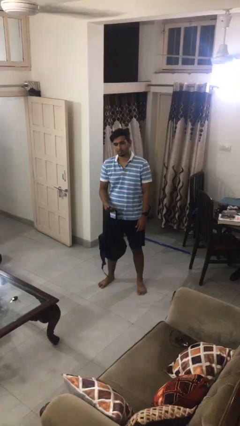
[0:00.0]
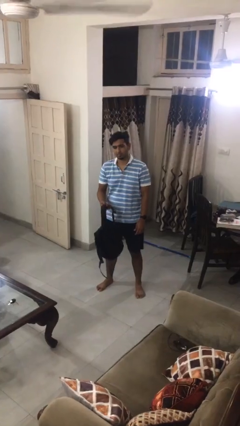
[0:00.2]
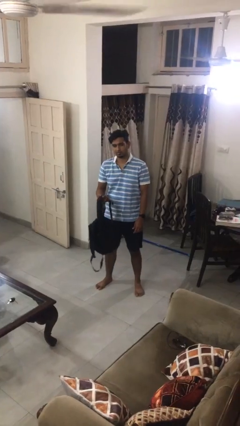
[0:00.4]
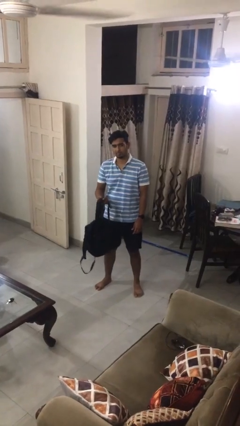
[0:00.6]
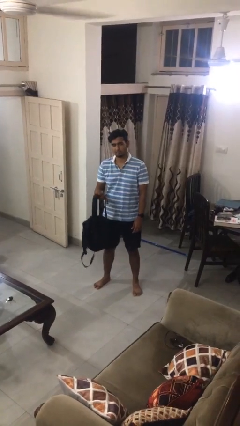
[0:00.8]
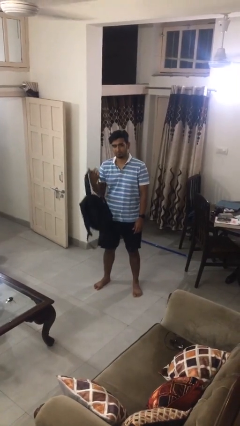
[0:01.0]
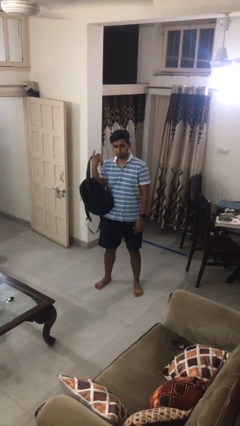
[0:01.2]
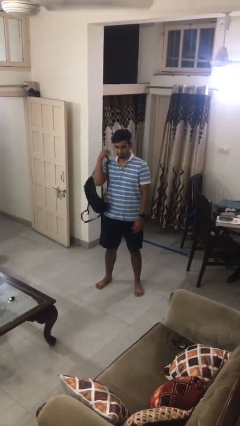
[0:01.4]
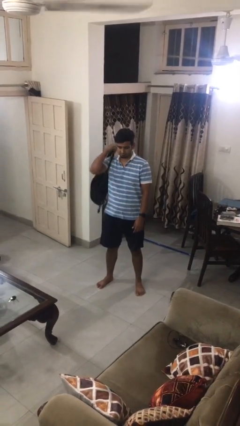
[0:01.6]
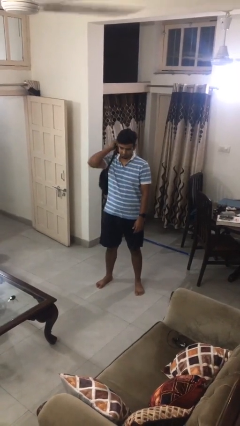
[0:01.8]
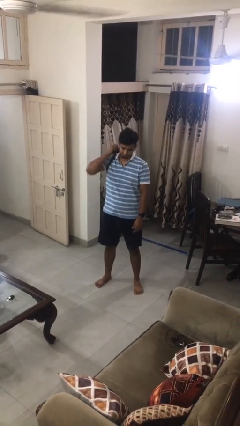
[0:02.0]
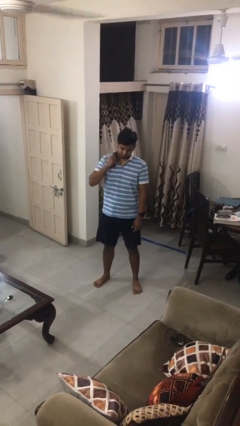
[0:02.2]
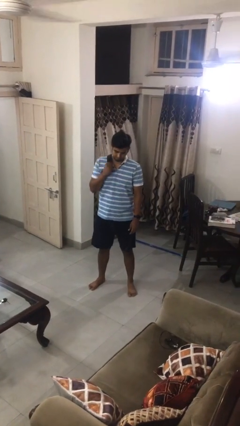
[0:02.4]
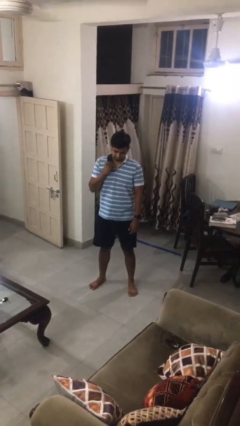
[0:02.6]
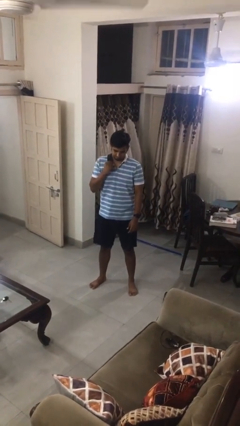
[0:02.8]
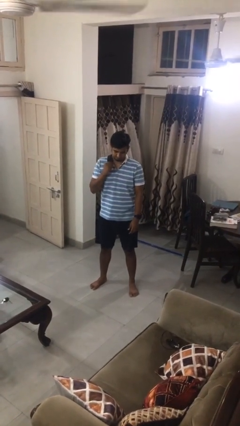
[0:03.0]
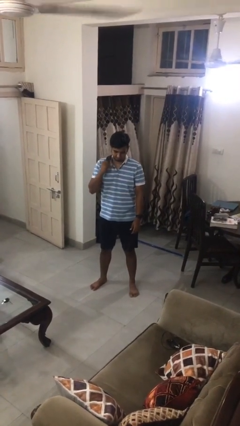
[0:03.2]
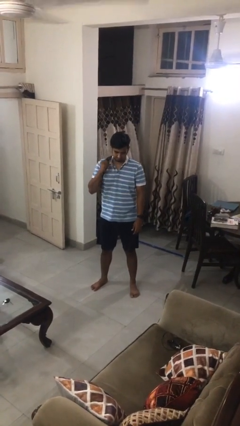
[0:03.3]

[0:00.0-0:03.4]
person puts on backpack

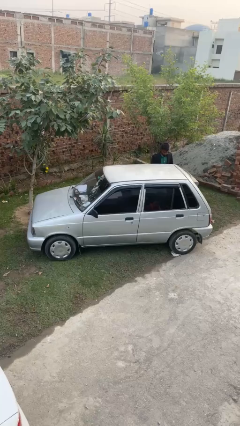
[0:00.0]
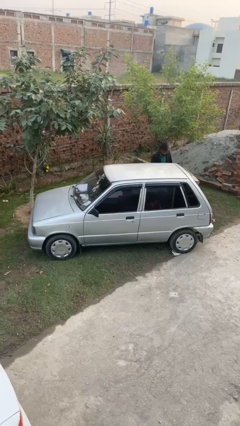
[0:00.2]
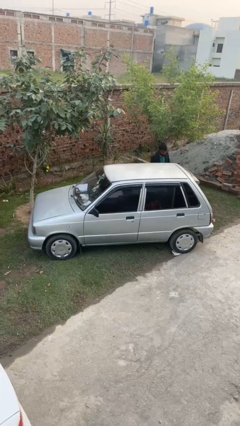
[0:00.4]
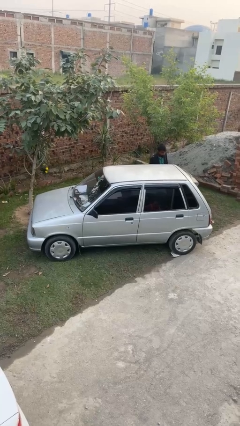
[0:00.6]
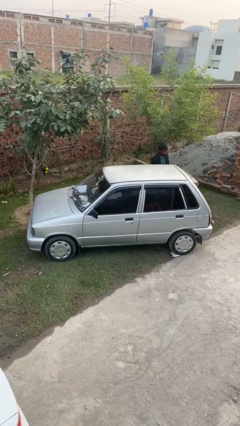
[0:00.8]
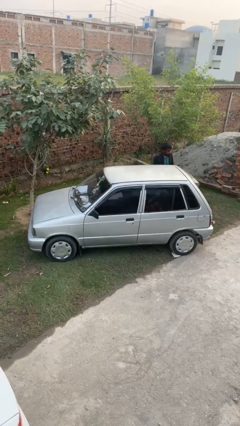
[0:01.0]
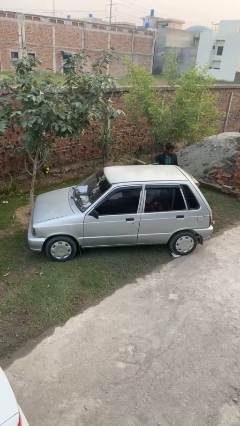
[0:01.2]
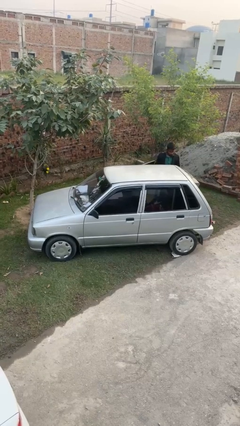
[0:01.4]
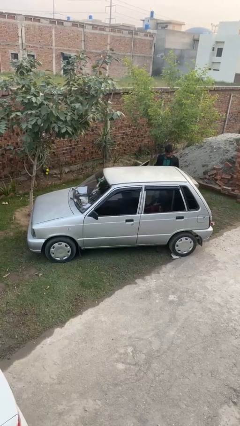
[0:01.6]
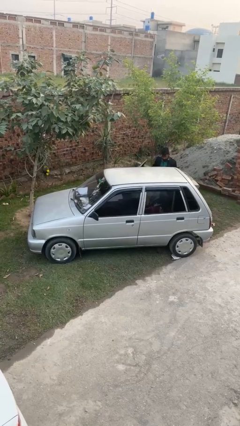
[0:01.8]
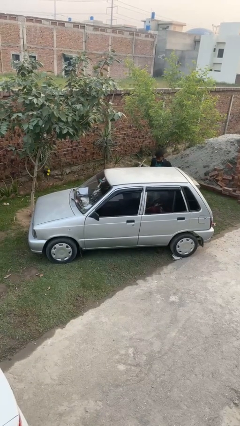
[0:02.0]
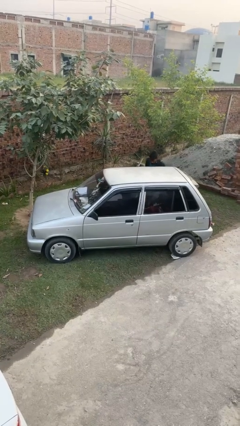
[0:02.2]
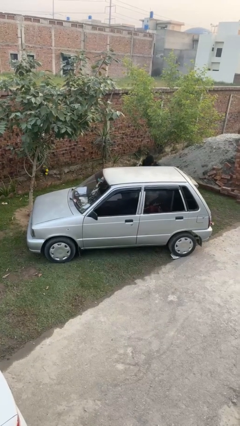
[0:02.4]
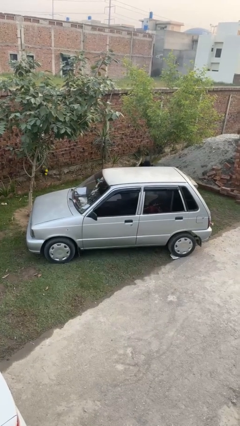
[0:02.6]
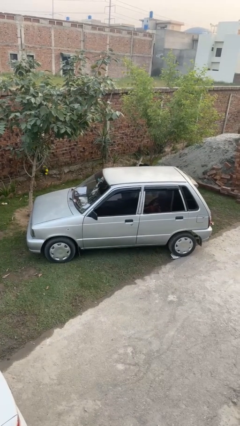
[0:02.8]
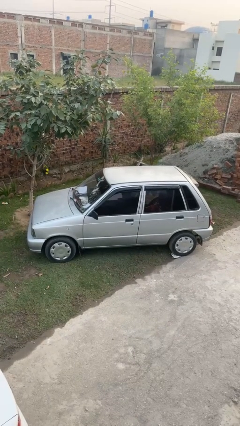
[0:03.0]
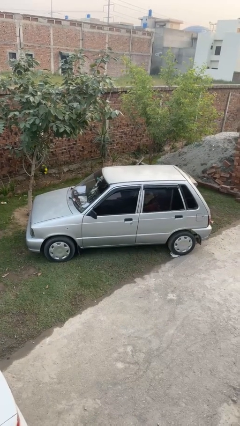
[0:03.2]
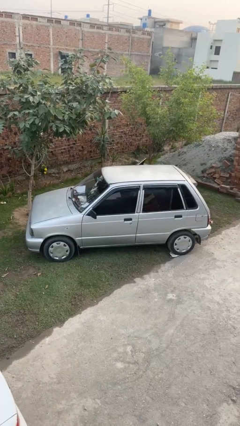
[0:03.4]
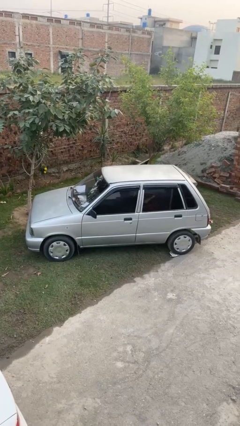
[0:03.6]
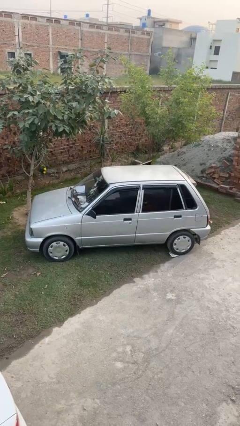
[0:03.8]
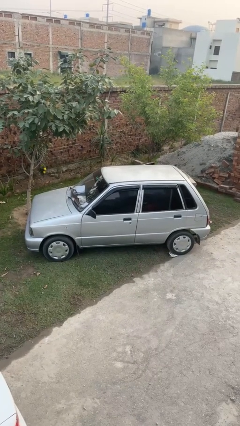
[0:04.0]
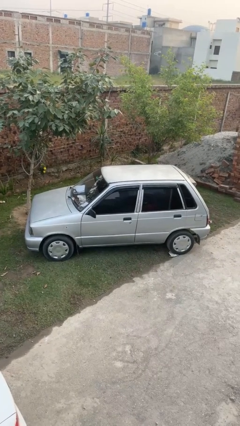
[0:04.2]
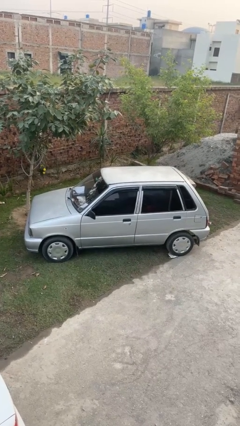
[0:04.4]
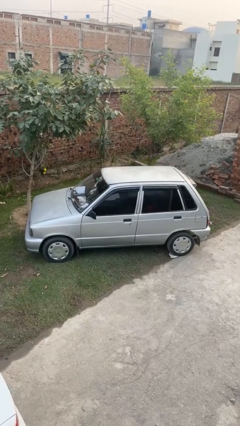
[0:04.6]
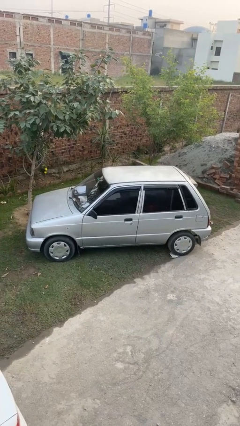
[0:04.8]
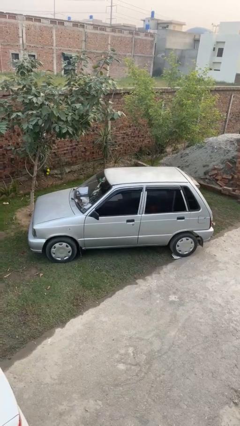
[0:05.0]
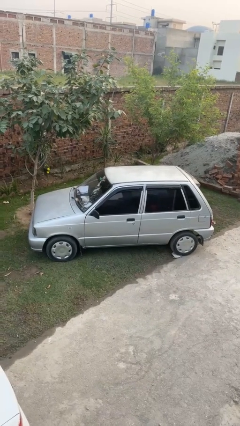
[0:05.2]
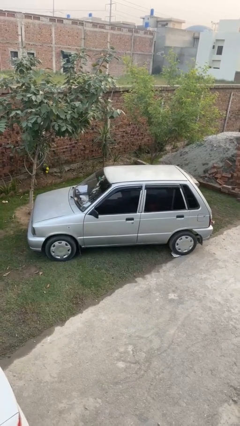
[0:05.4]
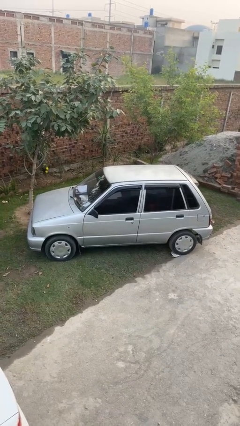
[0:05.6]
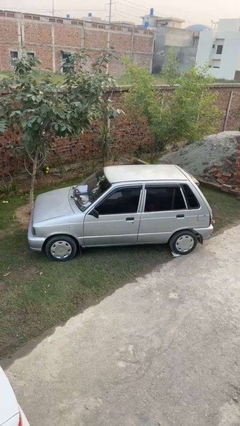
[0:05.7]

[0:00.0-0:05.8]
car picks up person

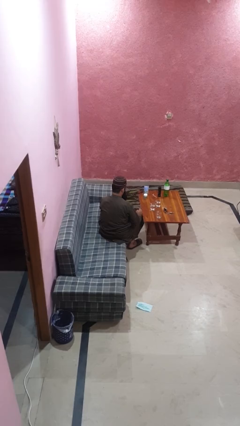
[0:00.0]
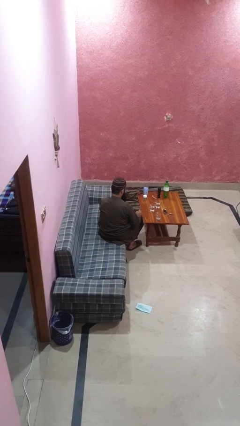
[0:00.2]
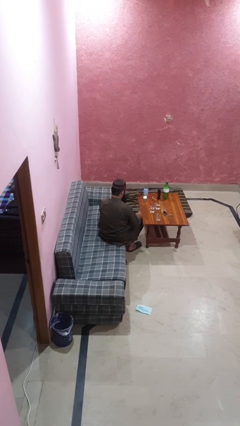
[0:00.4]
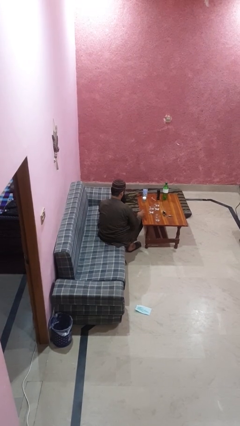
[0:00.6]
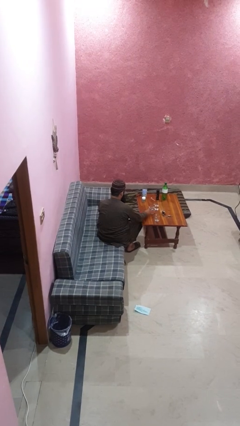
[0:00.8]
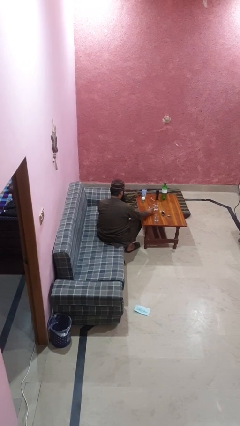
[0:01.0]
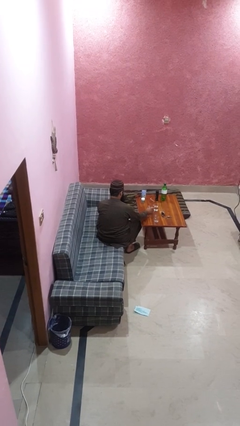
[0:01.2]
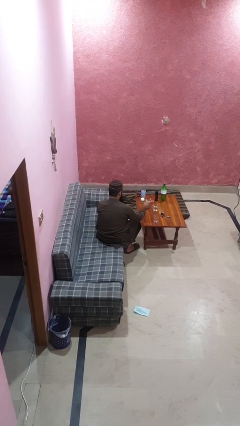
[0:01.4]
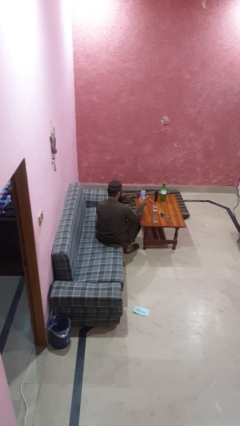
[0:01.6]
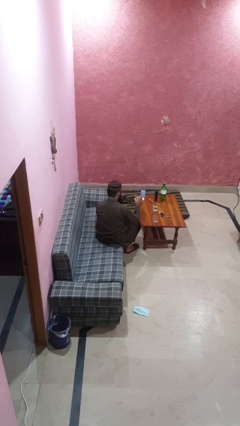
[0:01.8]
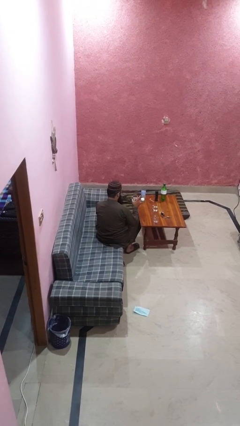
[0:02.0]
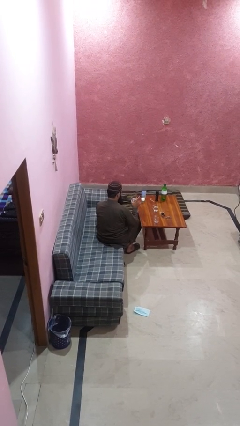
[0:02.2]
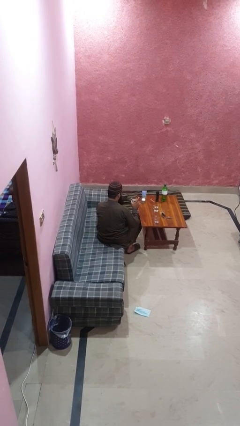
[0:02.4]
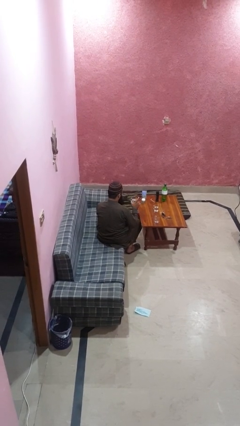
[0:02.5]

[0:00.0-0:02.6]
person picks up object from table

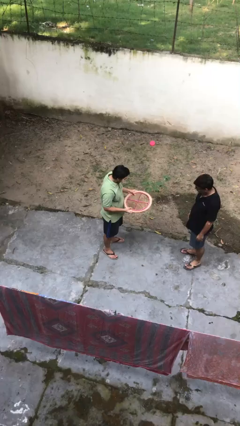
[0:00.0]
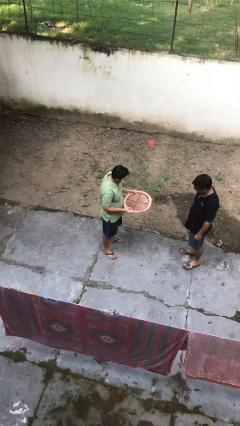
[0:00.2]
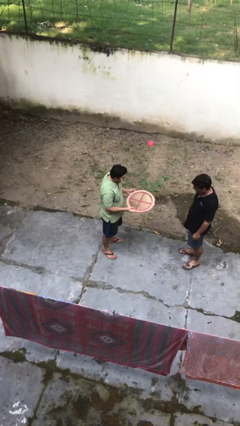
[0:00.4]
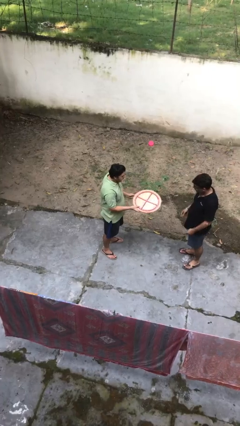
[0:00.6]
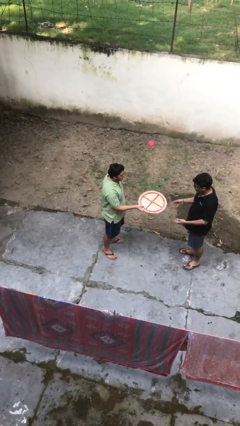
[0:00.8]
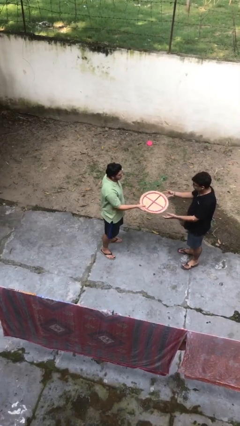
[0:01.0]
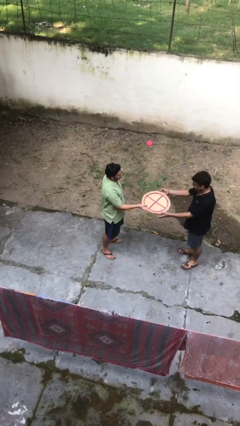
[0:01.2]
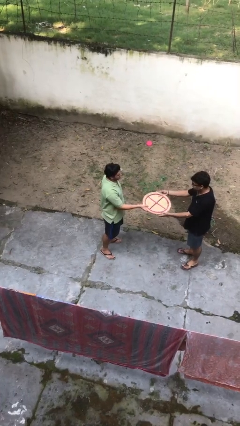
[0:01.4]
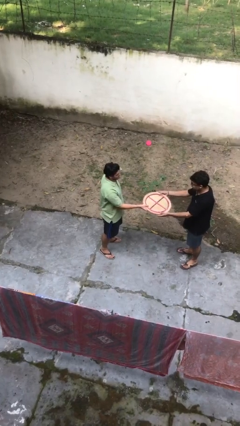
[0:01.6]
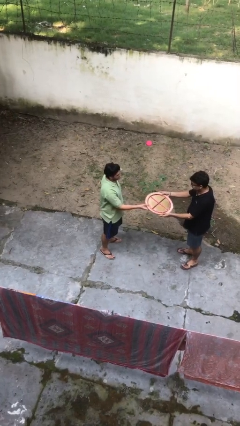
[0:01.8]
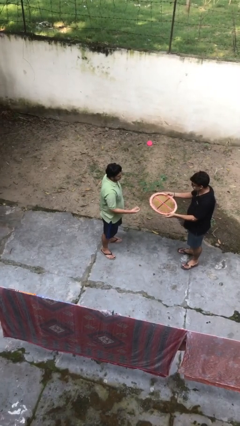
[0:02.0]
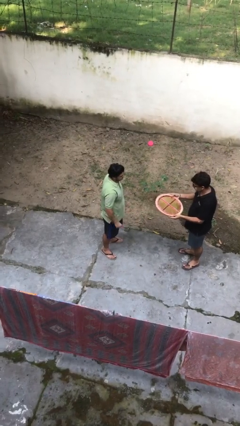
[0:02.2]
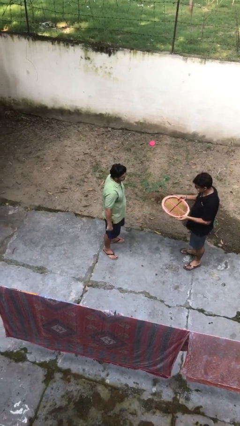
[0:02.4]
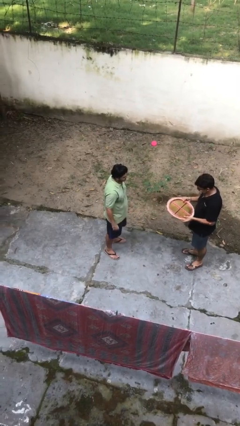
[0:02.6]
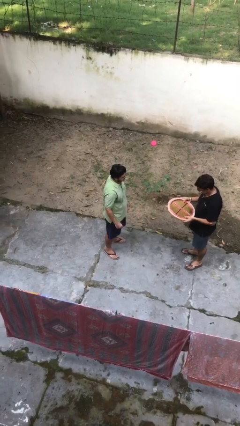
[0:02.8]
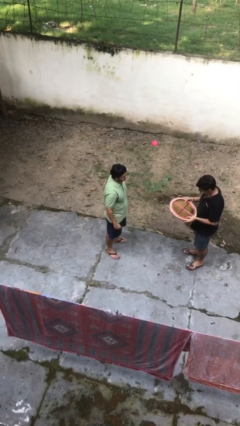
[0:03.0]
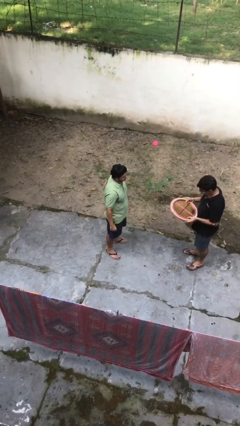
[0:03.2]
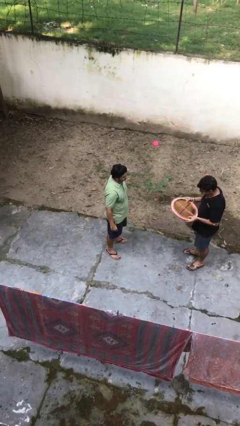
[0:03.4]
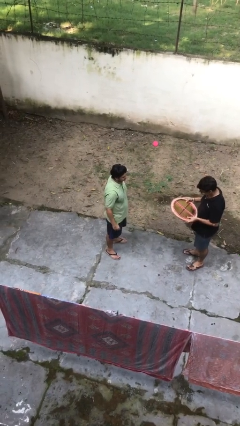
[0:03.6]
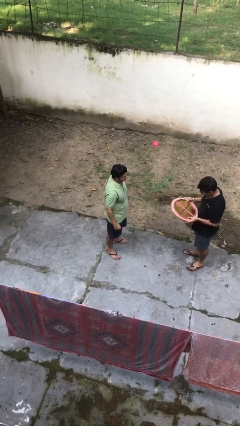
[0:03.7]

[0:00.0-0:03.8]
person transfers object to person

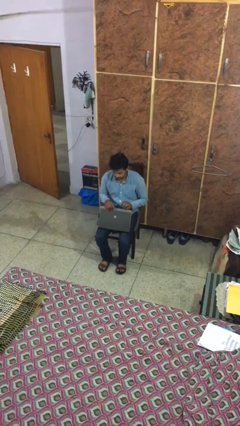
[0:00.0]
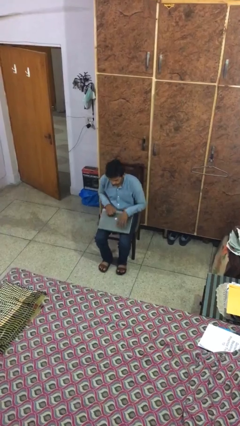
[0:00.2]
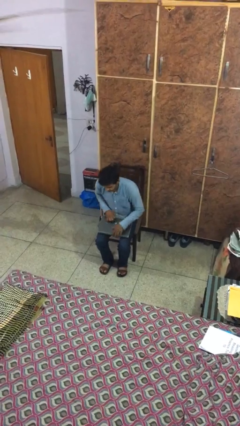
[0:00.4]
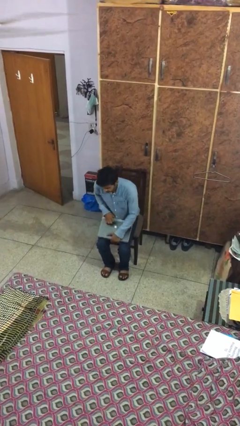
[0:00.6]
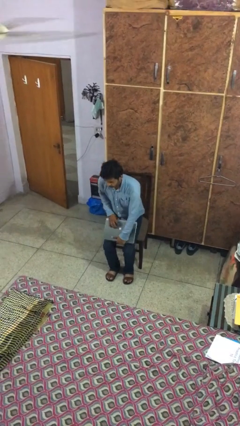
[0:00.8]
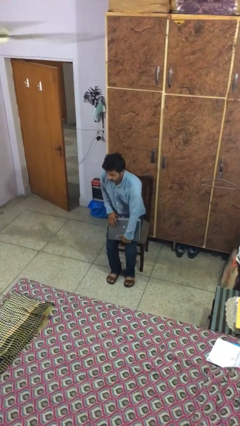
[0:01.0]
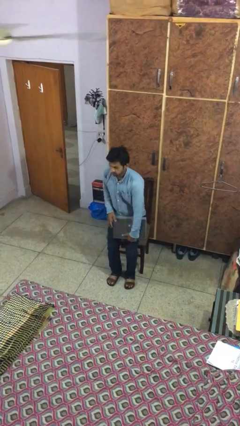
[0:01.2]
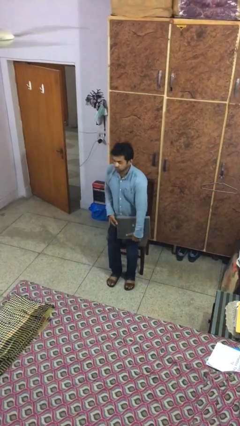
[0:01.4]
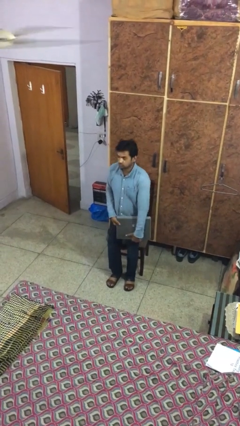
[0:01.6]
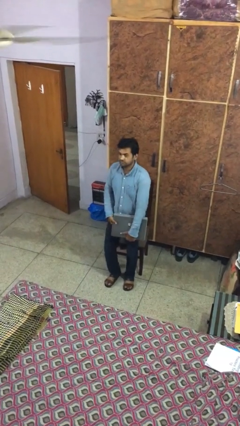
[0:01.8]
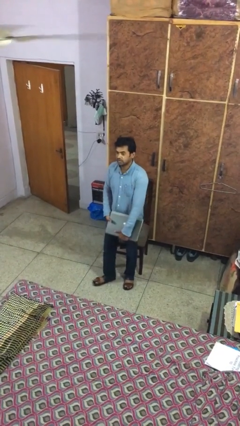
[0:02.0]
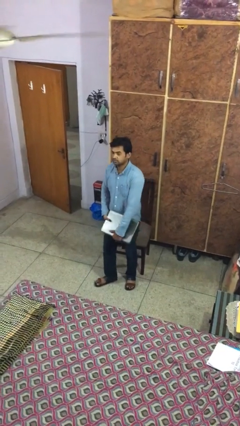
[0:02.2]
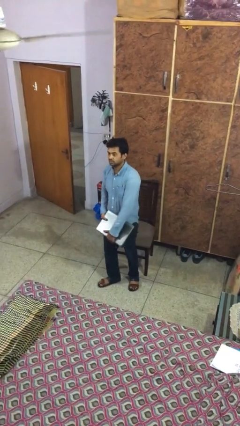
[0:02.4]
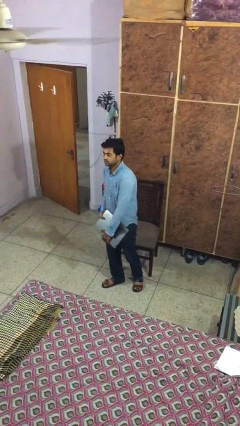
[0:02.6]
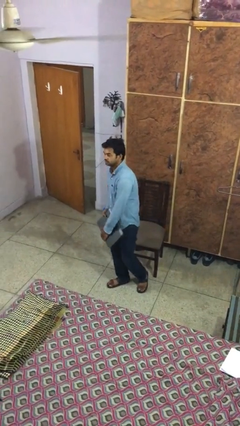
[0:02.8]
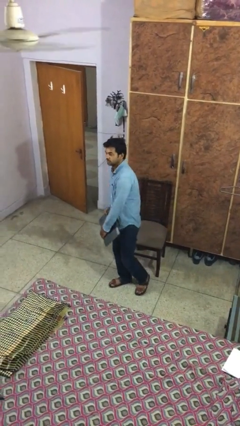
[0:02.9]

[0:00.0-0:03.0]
person stands up
